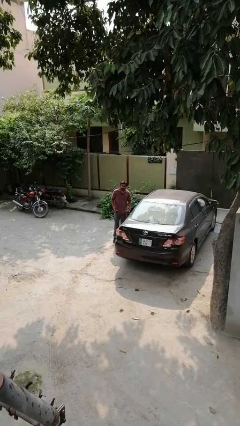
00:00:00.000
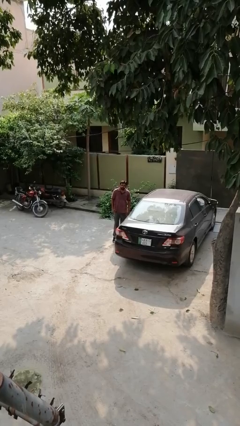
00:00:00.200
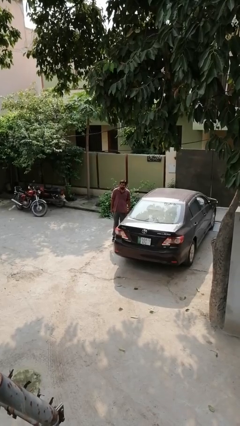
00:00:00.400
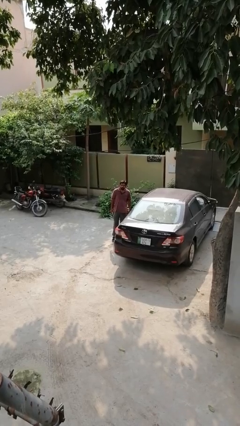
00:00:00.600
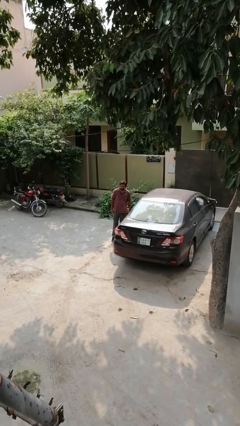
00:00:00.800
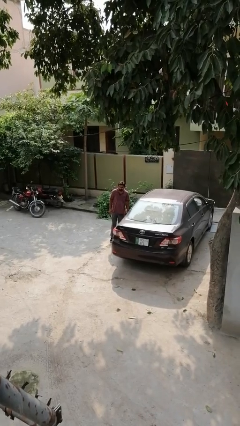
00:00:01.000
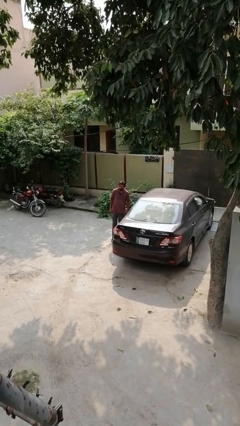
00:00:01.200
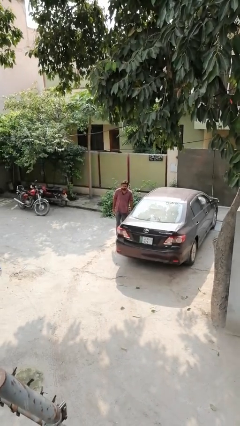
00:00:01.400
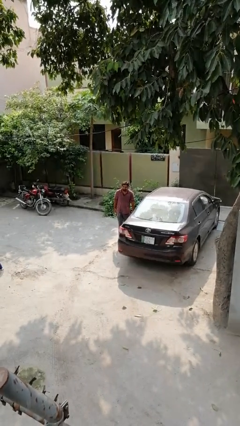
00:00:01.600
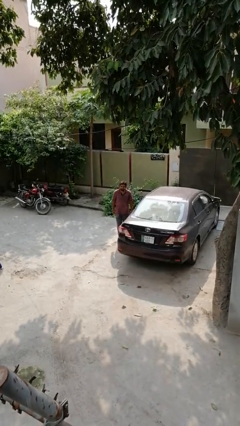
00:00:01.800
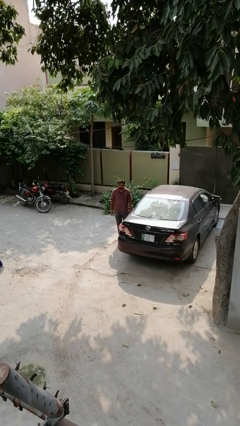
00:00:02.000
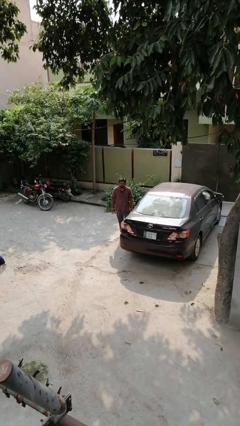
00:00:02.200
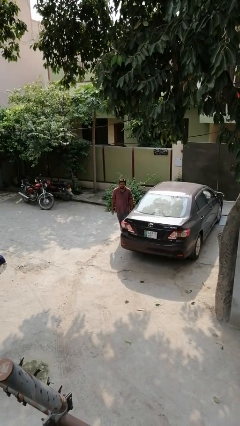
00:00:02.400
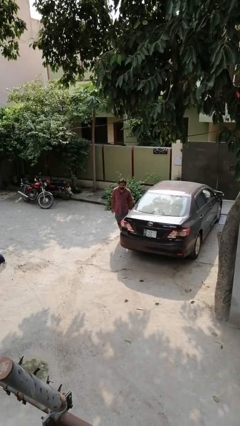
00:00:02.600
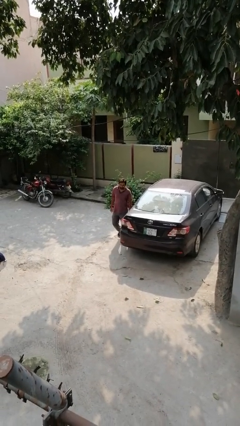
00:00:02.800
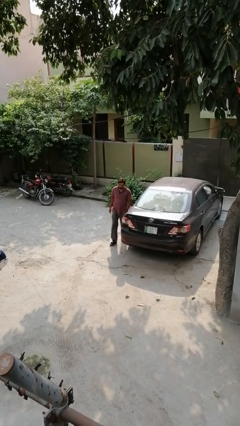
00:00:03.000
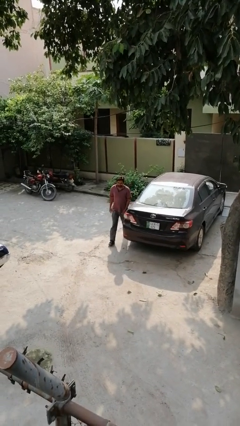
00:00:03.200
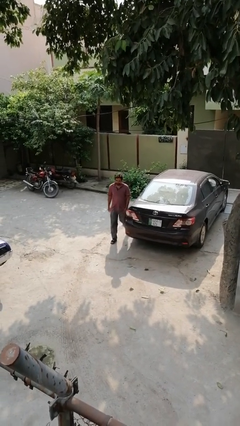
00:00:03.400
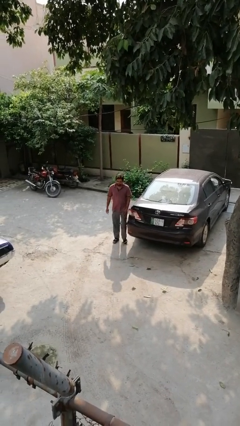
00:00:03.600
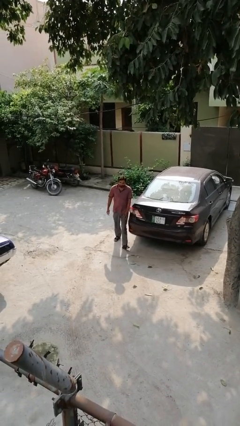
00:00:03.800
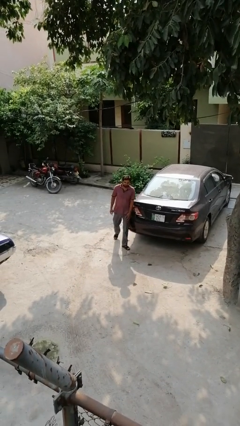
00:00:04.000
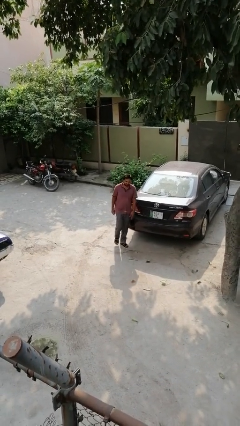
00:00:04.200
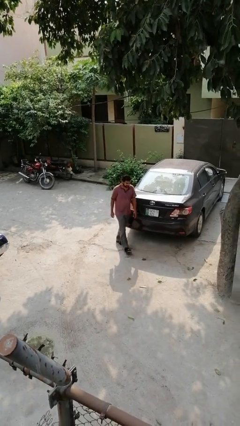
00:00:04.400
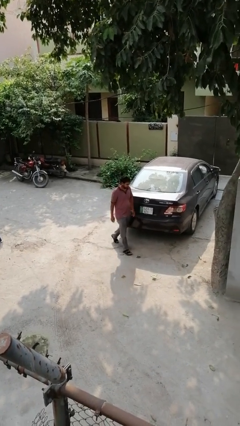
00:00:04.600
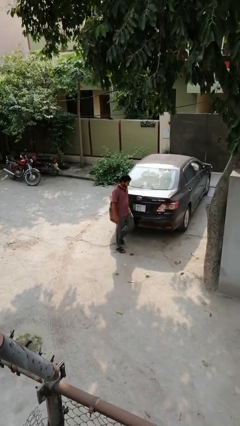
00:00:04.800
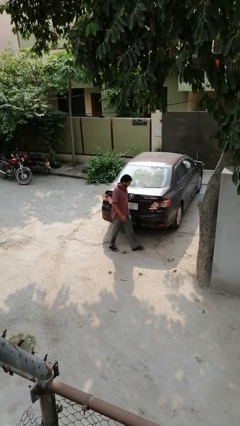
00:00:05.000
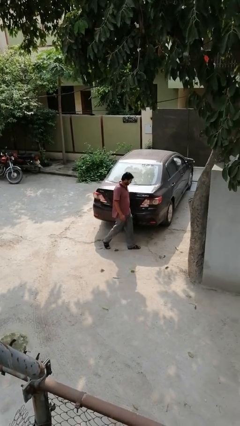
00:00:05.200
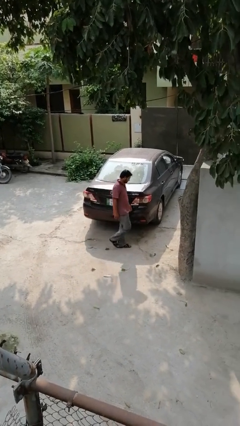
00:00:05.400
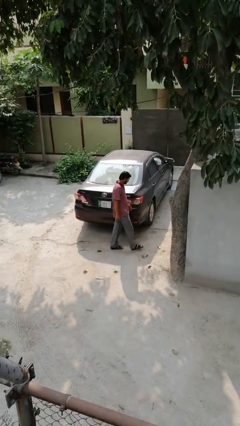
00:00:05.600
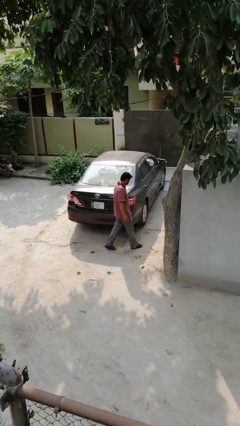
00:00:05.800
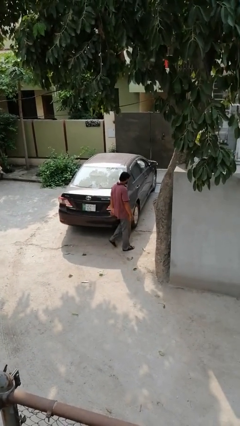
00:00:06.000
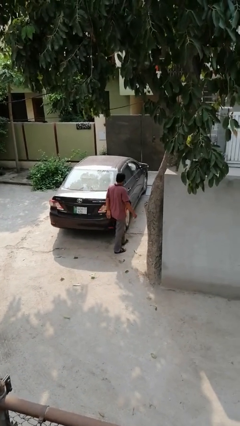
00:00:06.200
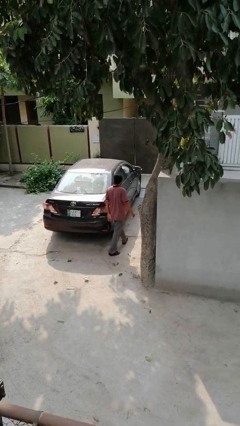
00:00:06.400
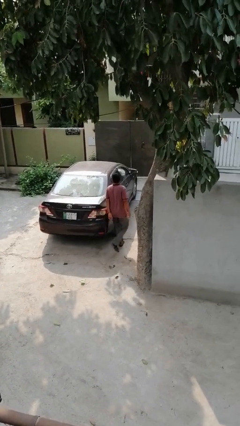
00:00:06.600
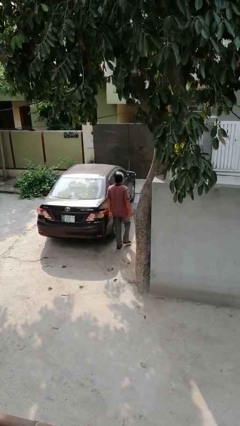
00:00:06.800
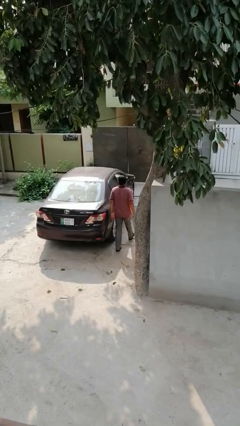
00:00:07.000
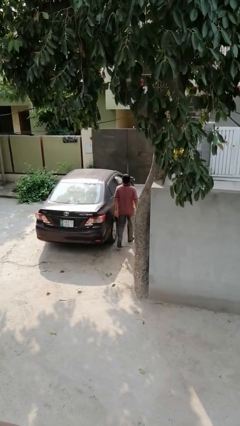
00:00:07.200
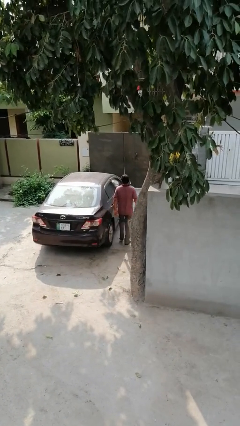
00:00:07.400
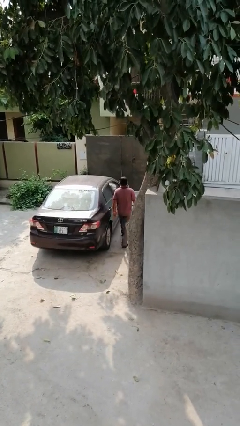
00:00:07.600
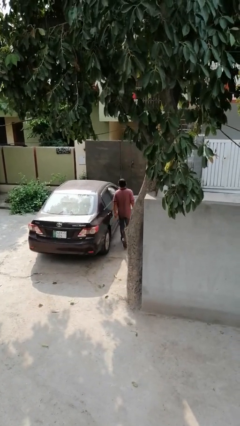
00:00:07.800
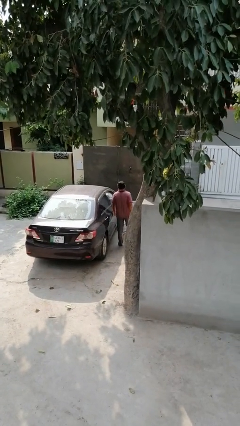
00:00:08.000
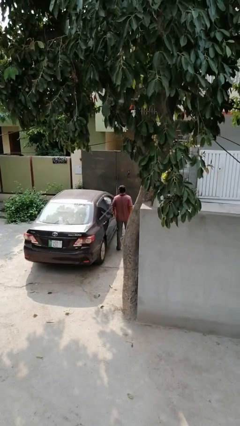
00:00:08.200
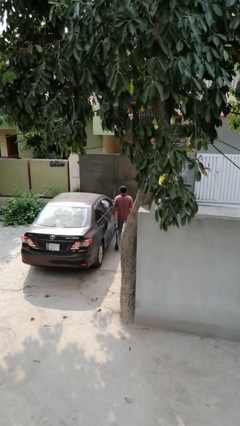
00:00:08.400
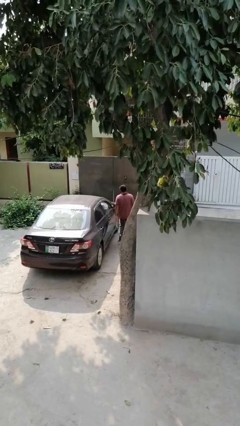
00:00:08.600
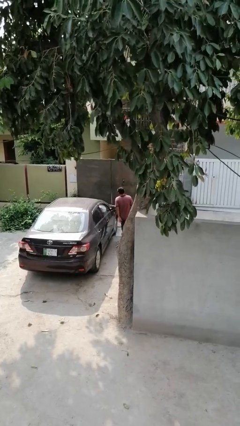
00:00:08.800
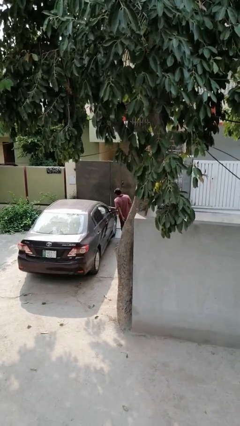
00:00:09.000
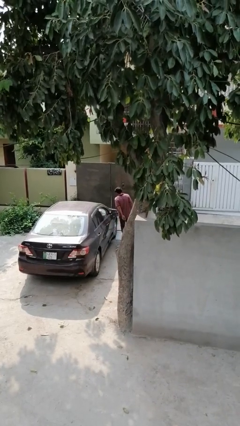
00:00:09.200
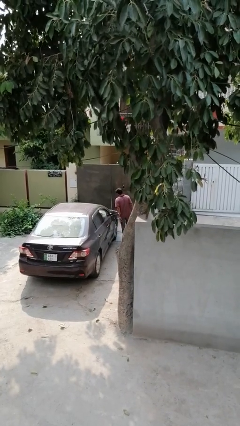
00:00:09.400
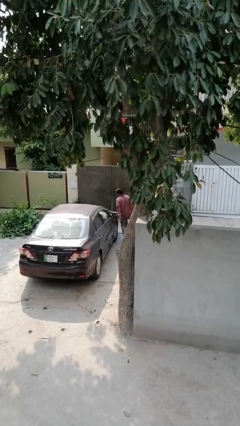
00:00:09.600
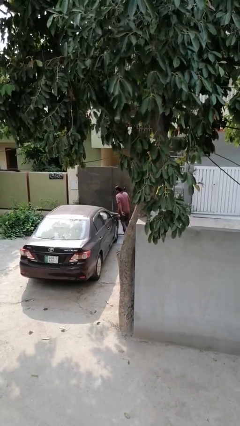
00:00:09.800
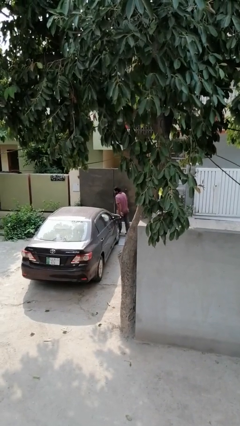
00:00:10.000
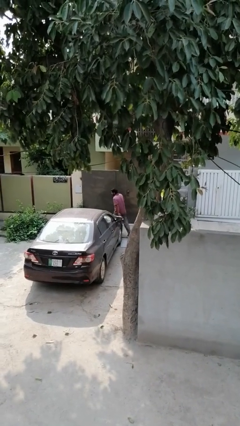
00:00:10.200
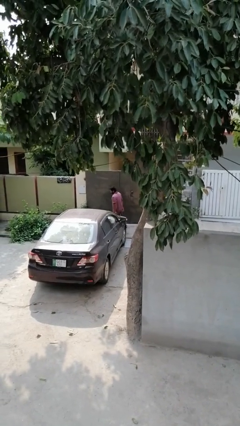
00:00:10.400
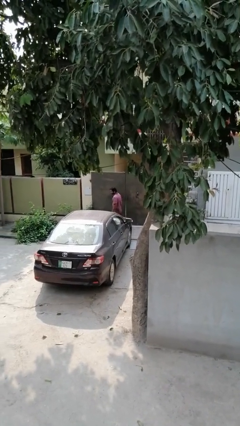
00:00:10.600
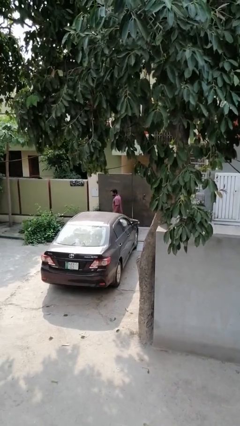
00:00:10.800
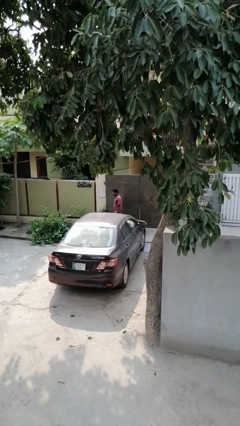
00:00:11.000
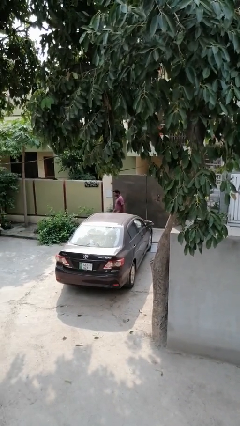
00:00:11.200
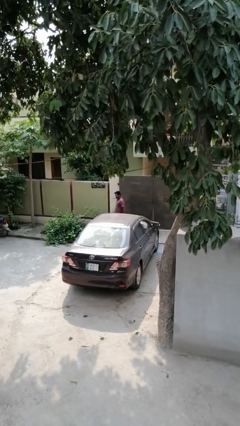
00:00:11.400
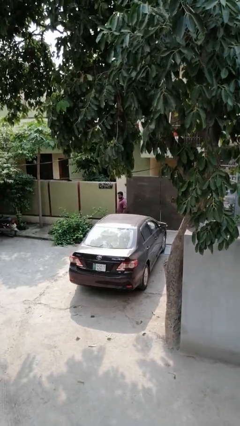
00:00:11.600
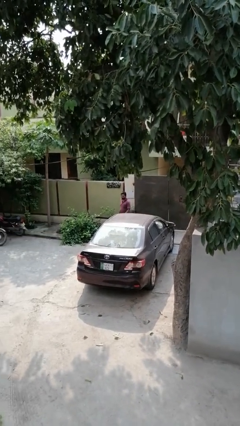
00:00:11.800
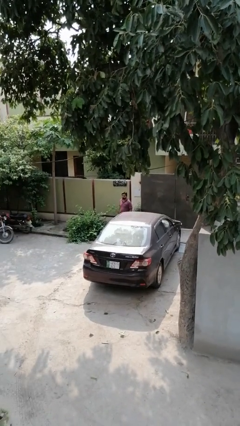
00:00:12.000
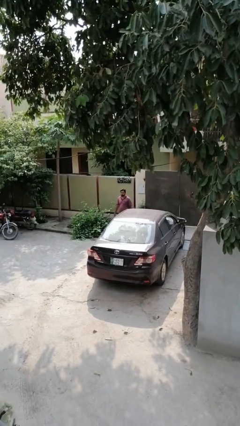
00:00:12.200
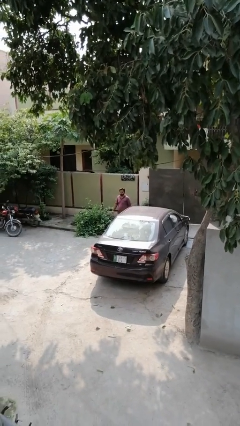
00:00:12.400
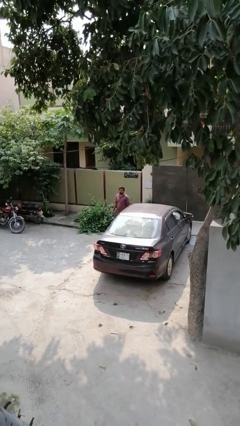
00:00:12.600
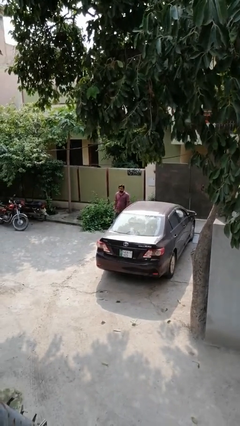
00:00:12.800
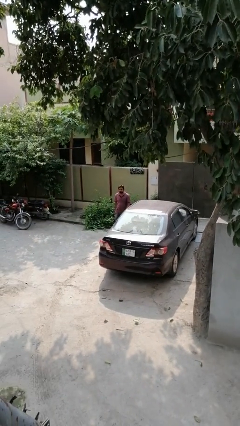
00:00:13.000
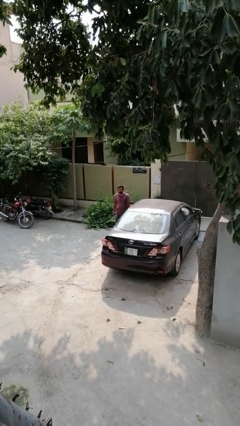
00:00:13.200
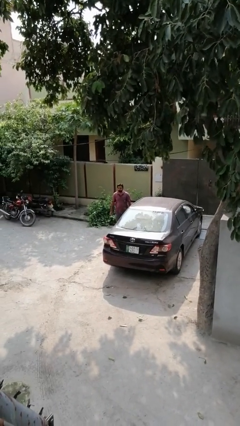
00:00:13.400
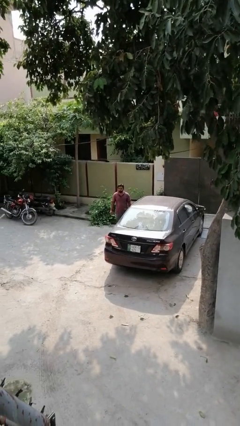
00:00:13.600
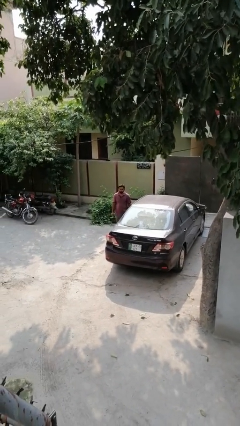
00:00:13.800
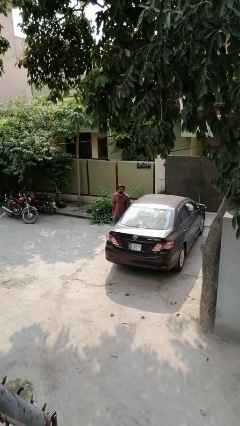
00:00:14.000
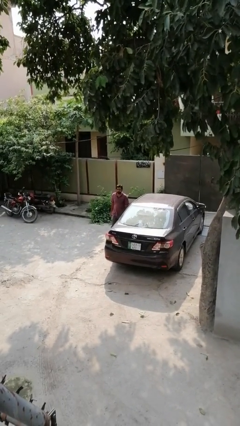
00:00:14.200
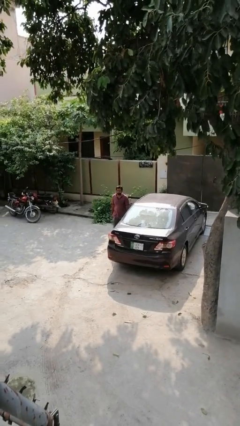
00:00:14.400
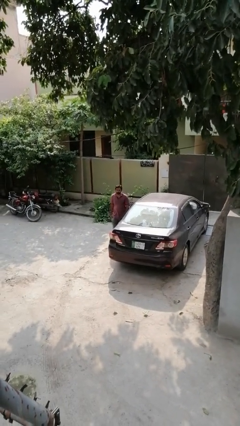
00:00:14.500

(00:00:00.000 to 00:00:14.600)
person walks around car

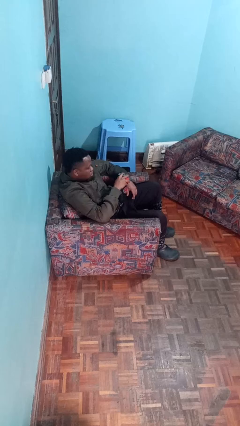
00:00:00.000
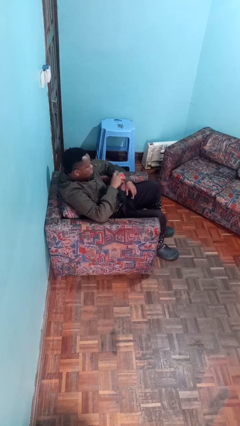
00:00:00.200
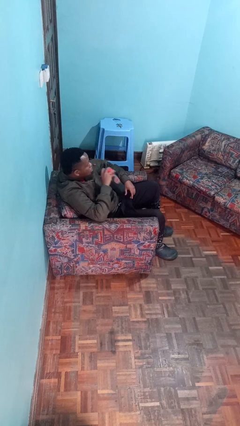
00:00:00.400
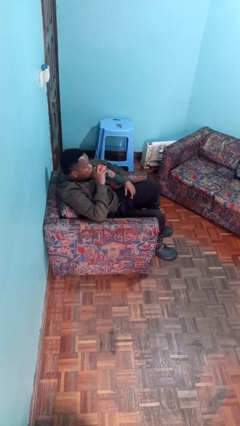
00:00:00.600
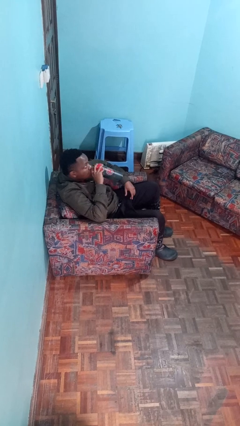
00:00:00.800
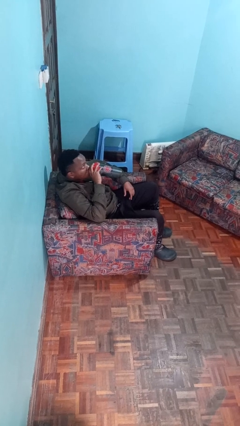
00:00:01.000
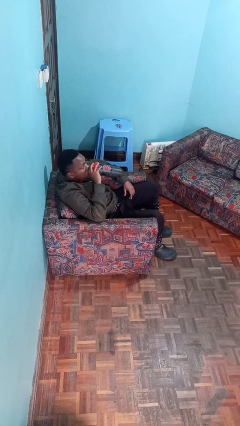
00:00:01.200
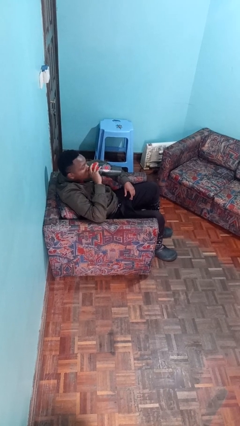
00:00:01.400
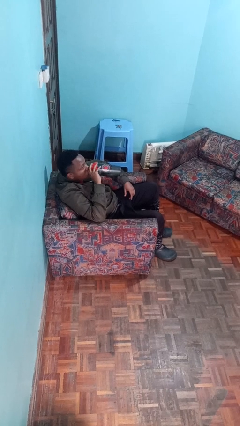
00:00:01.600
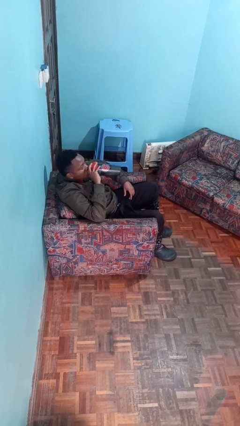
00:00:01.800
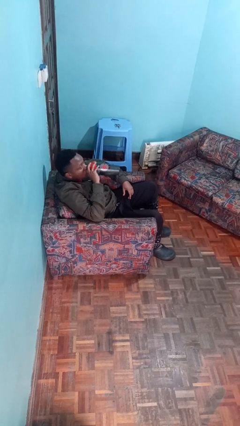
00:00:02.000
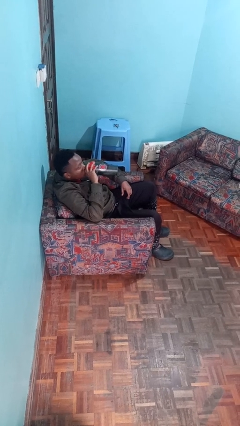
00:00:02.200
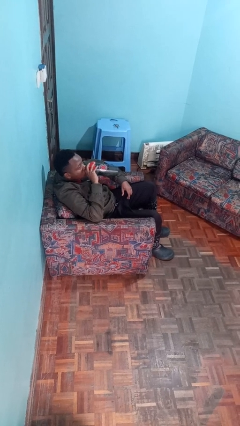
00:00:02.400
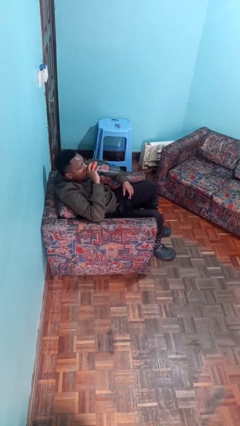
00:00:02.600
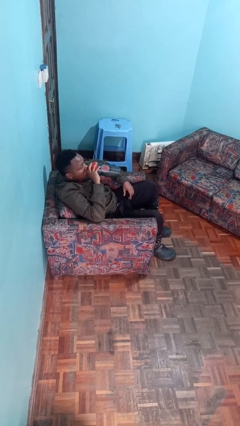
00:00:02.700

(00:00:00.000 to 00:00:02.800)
person drinks from bottle

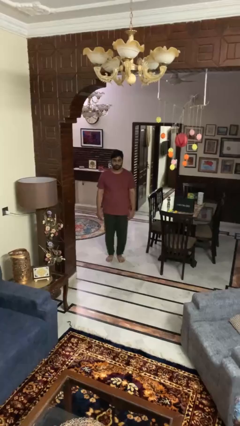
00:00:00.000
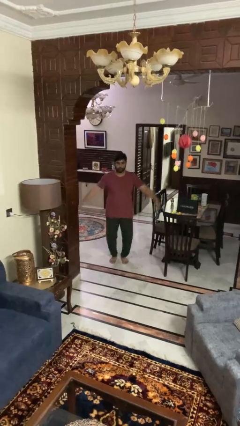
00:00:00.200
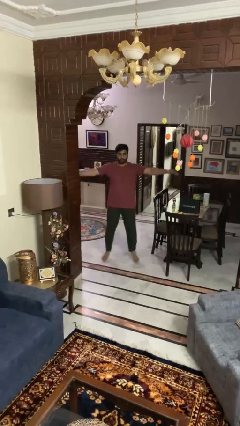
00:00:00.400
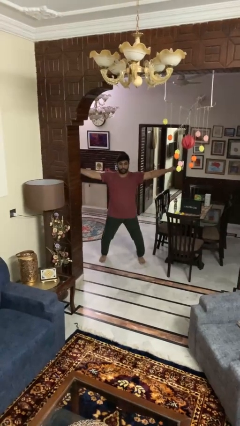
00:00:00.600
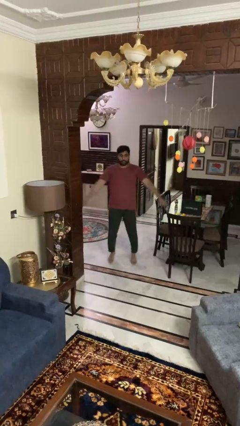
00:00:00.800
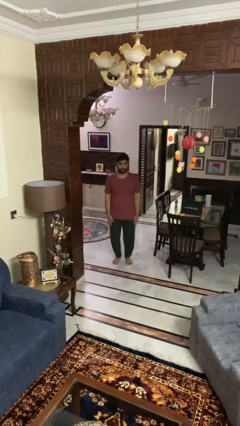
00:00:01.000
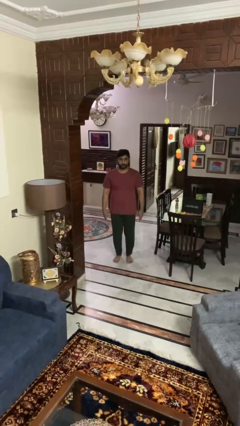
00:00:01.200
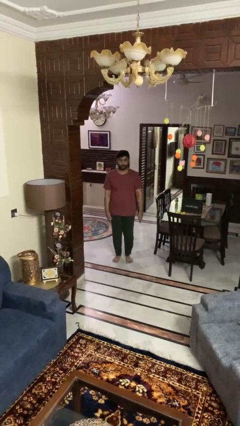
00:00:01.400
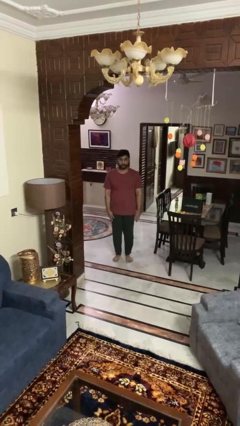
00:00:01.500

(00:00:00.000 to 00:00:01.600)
person exercises with jumping jacks
